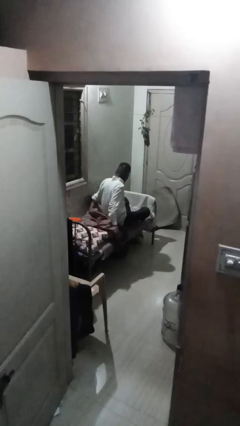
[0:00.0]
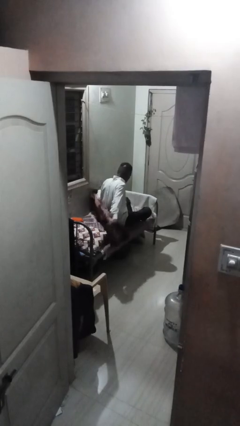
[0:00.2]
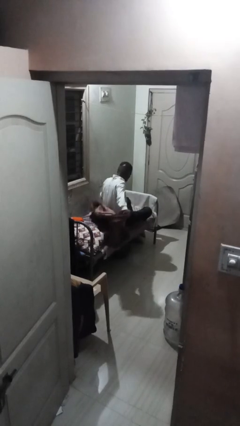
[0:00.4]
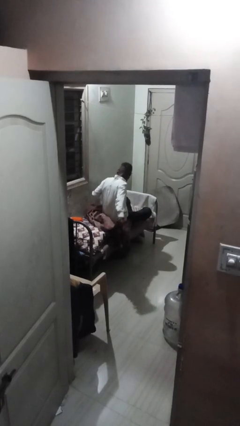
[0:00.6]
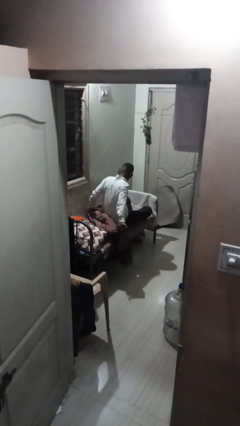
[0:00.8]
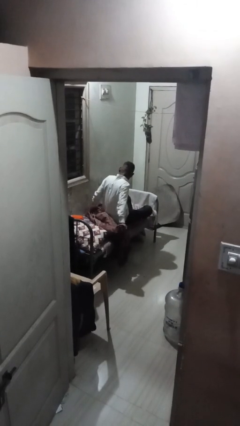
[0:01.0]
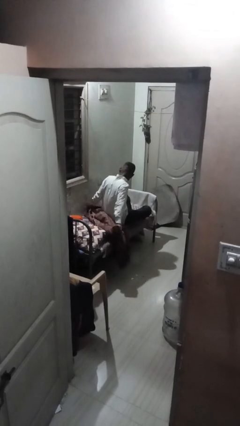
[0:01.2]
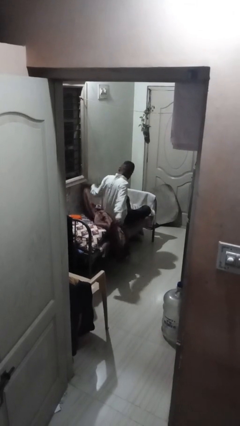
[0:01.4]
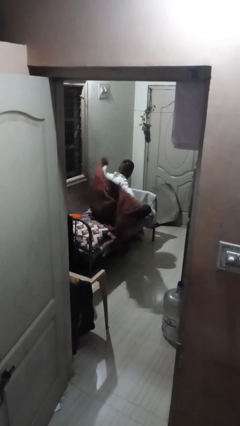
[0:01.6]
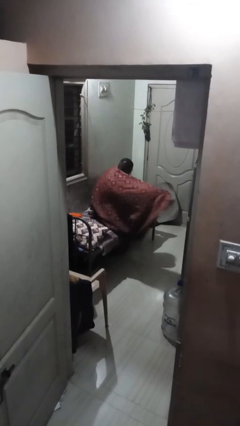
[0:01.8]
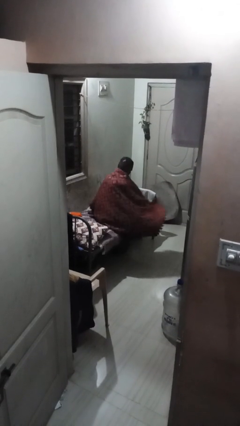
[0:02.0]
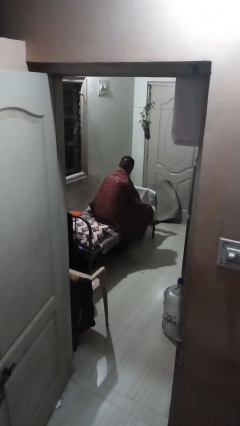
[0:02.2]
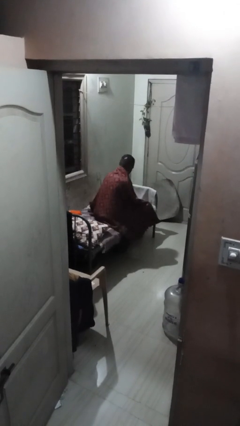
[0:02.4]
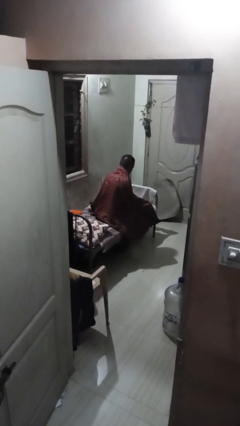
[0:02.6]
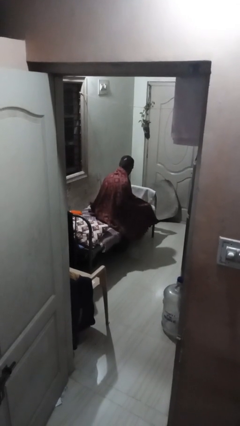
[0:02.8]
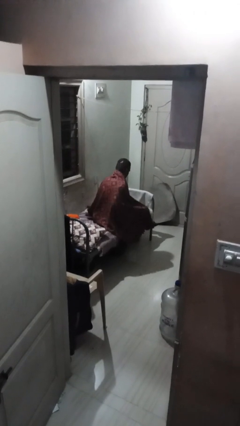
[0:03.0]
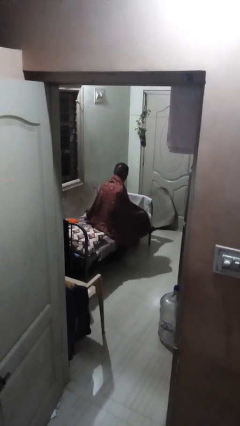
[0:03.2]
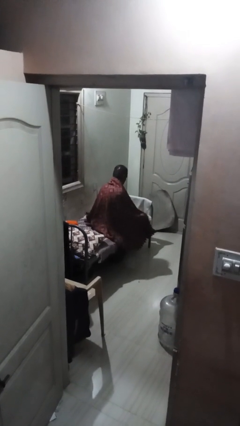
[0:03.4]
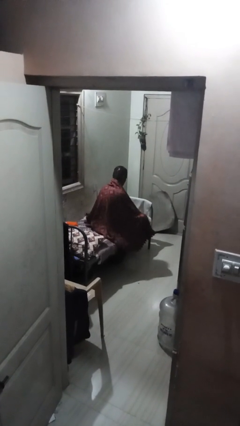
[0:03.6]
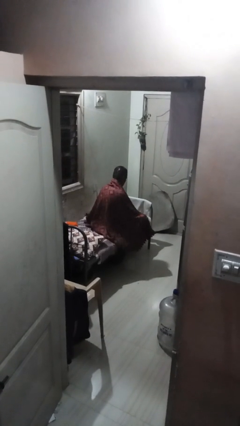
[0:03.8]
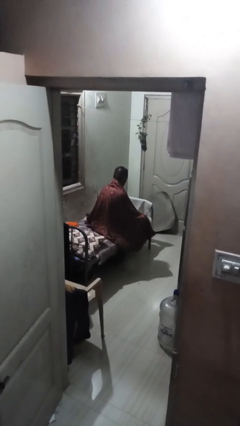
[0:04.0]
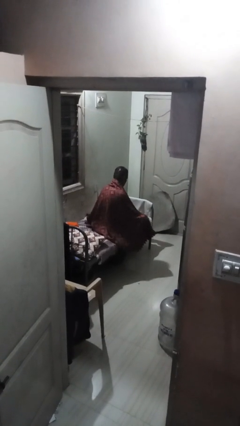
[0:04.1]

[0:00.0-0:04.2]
person covers with blanket

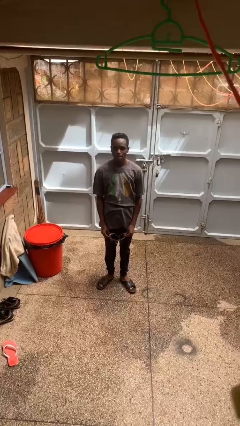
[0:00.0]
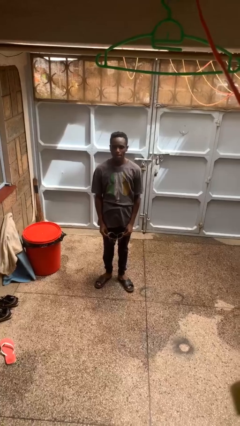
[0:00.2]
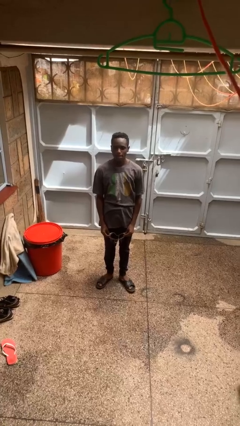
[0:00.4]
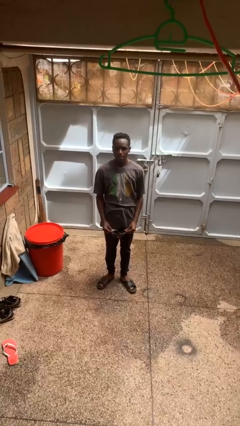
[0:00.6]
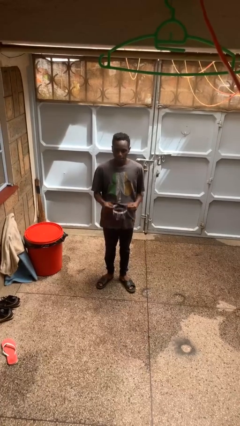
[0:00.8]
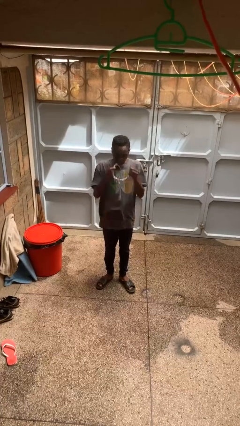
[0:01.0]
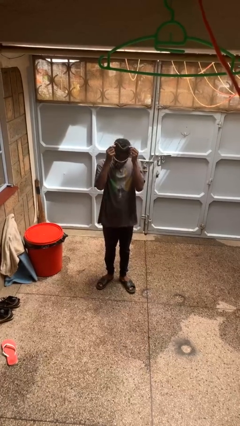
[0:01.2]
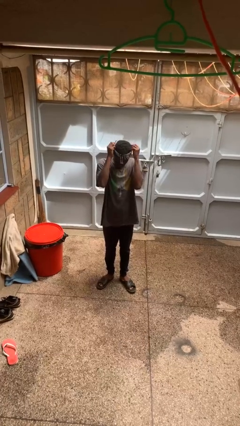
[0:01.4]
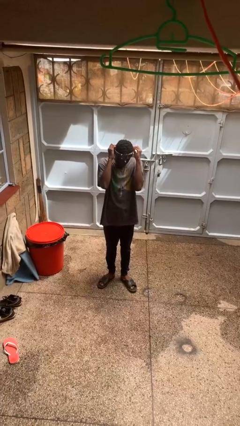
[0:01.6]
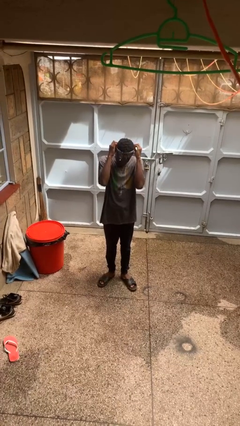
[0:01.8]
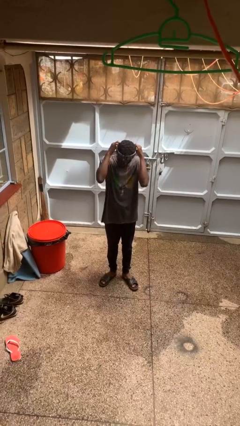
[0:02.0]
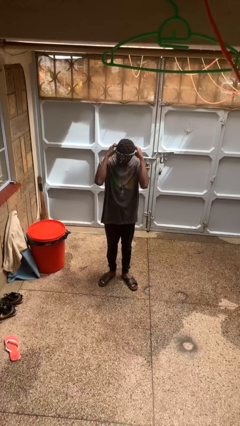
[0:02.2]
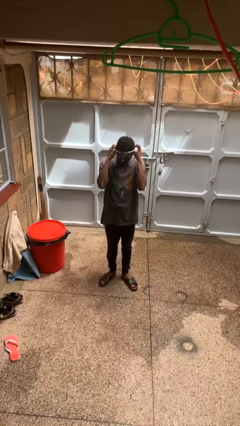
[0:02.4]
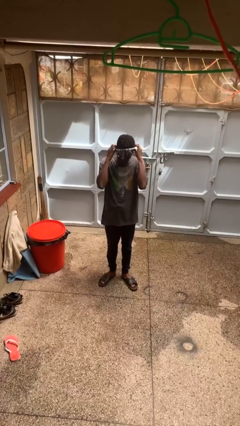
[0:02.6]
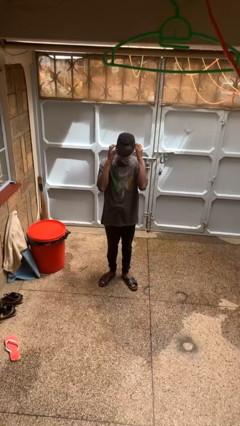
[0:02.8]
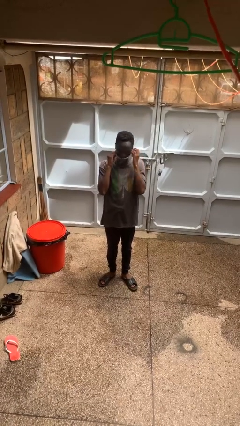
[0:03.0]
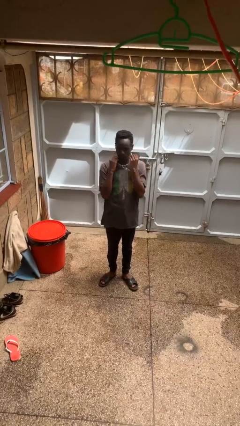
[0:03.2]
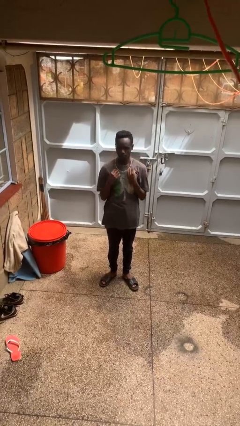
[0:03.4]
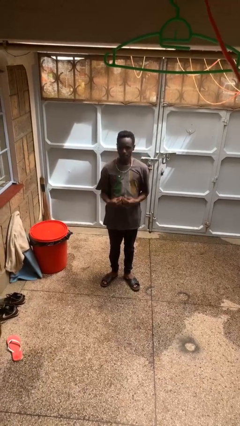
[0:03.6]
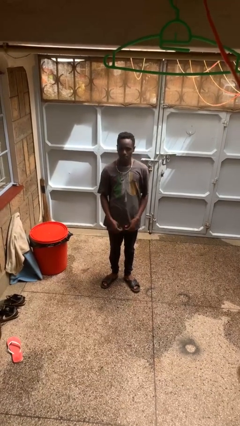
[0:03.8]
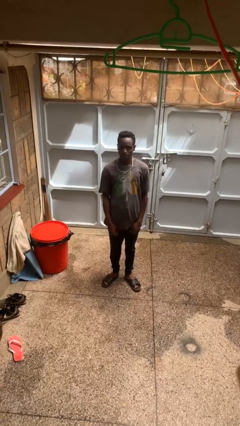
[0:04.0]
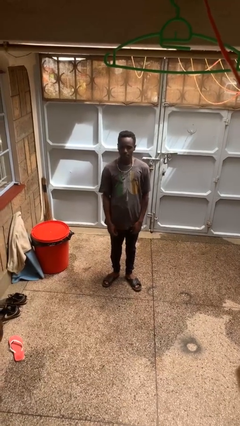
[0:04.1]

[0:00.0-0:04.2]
person puts on necklace

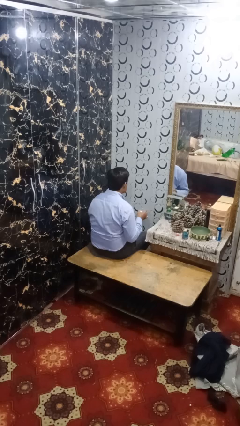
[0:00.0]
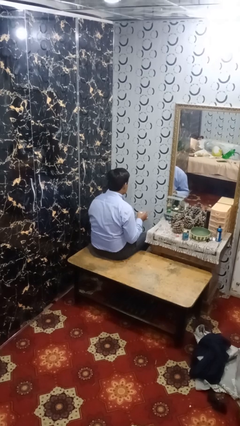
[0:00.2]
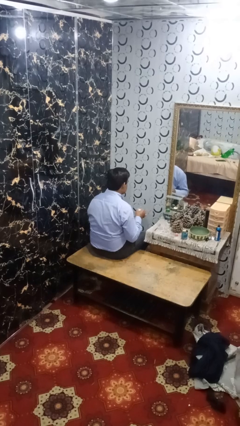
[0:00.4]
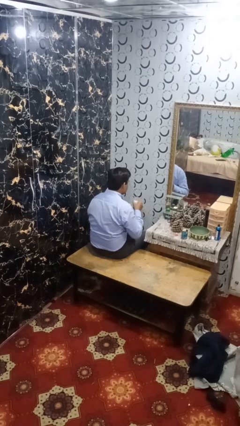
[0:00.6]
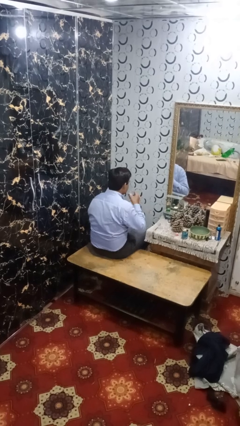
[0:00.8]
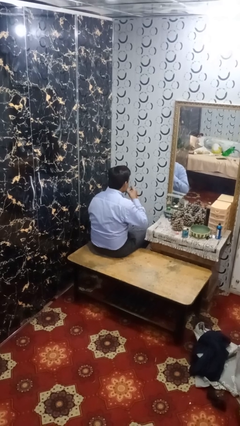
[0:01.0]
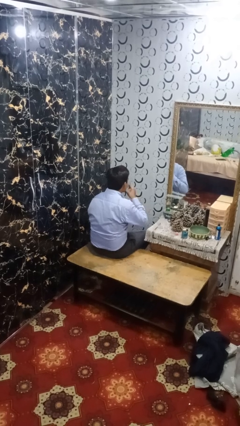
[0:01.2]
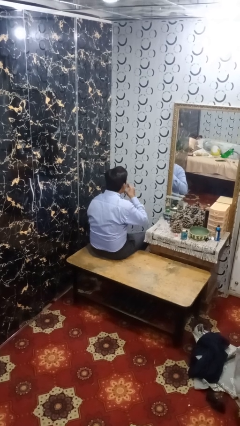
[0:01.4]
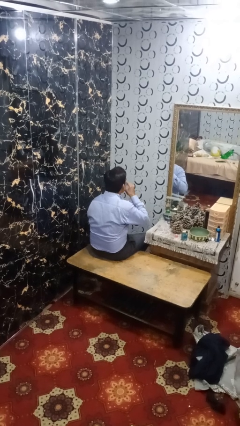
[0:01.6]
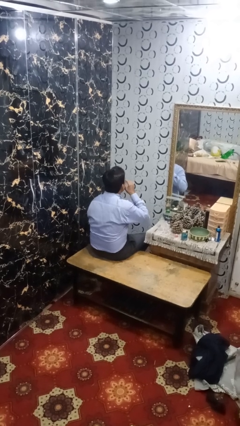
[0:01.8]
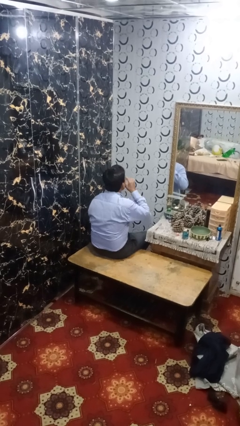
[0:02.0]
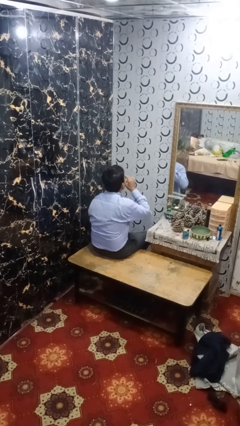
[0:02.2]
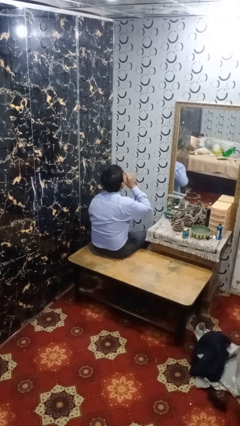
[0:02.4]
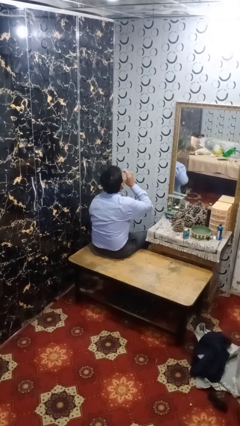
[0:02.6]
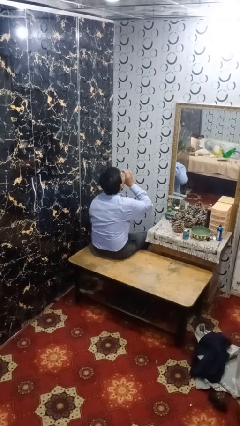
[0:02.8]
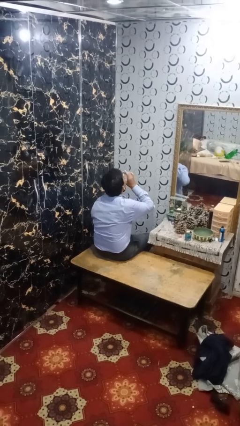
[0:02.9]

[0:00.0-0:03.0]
person drinks from shotglass

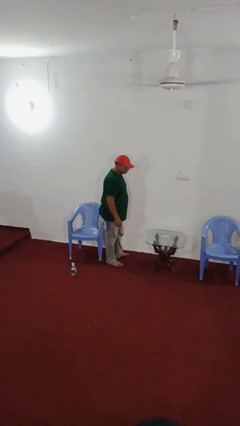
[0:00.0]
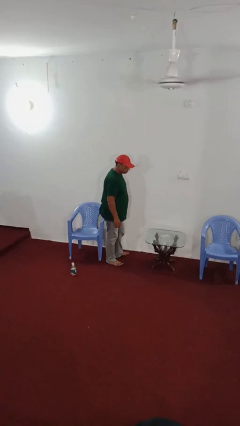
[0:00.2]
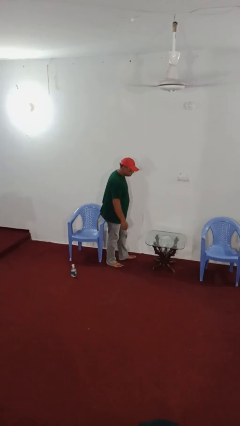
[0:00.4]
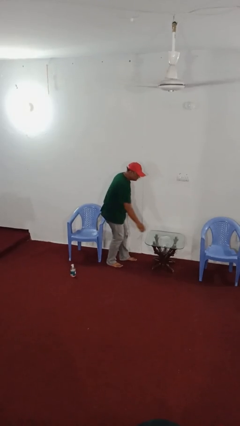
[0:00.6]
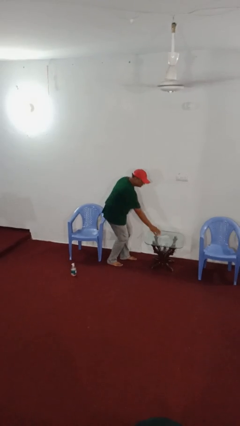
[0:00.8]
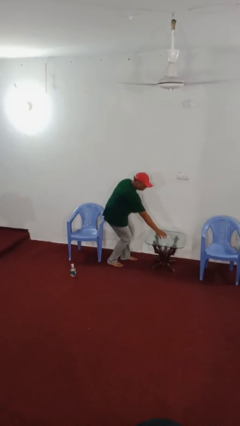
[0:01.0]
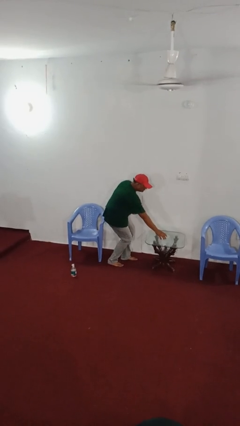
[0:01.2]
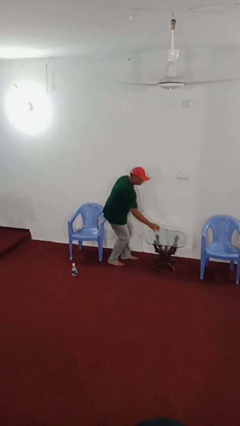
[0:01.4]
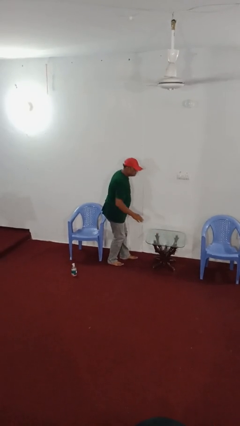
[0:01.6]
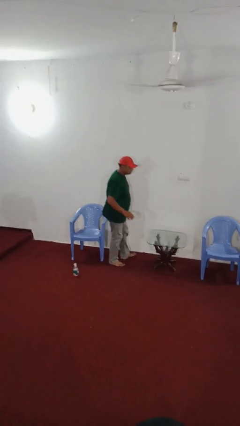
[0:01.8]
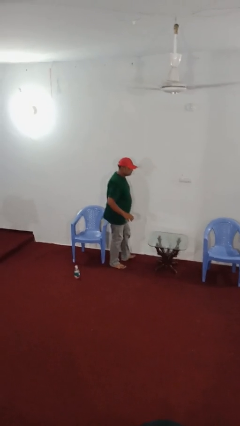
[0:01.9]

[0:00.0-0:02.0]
person picks up object from table

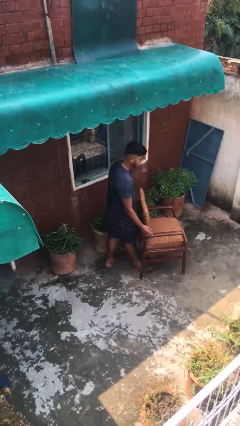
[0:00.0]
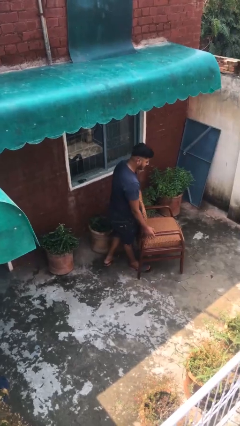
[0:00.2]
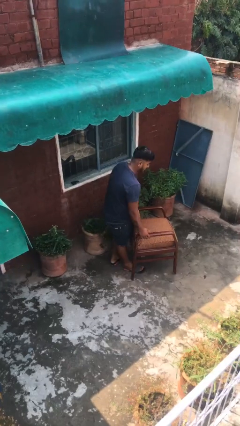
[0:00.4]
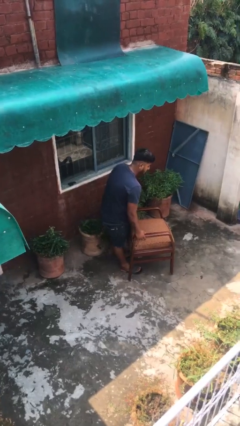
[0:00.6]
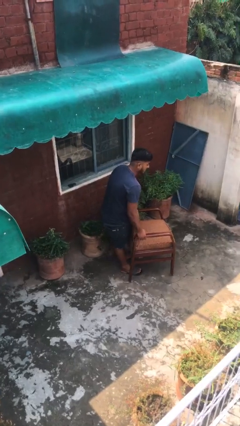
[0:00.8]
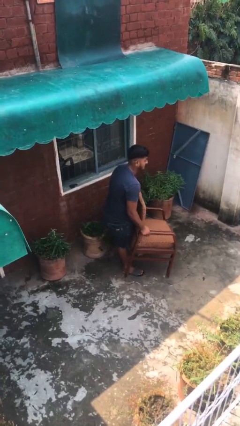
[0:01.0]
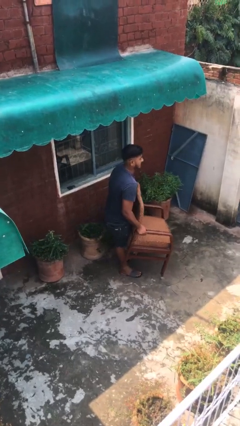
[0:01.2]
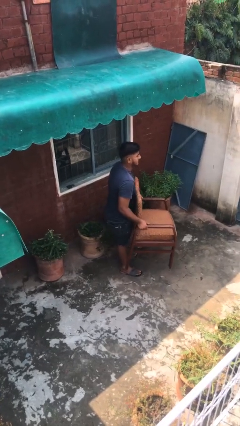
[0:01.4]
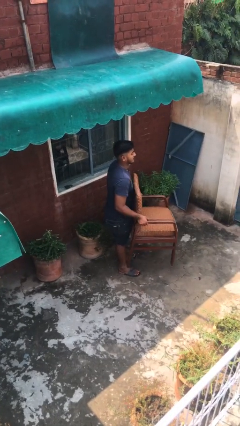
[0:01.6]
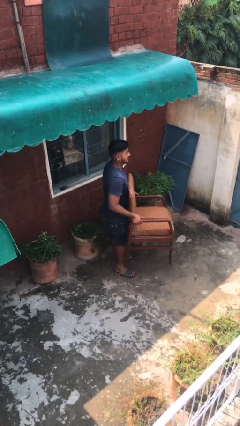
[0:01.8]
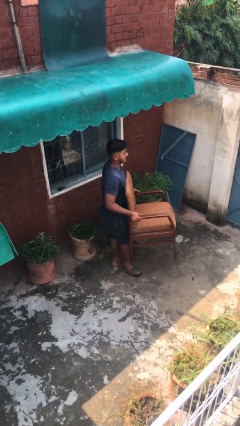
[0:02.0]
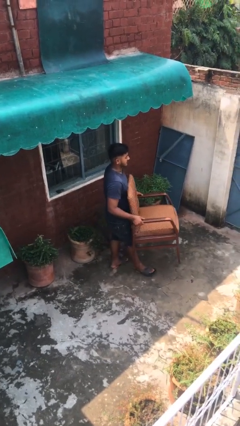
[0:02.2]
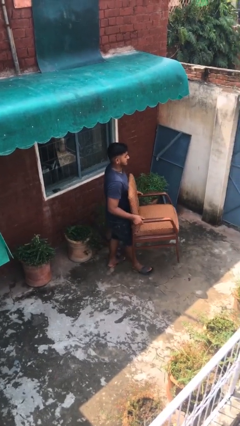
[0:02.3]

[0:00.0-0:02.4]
person picks up object from floor

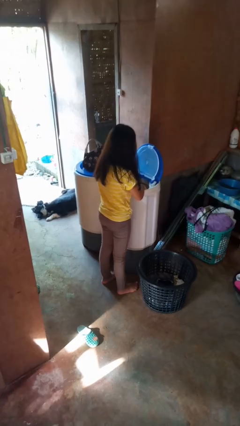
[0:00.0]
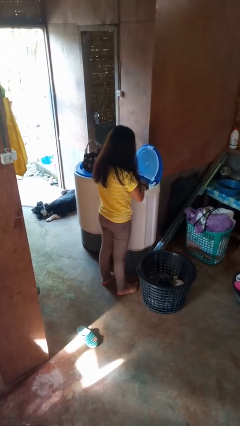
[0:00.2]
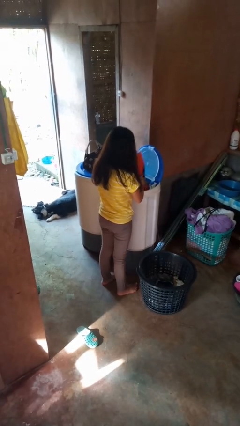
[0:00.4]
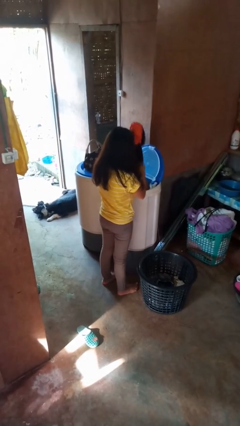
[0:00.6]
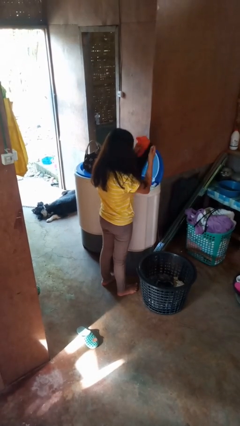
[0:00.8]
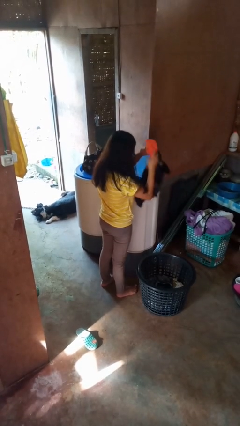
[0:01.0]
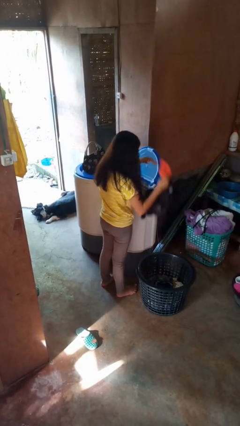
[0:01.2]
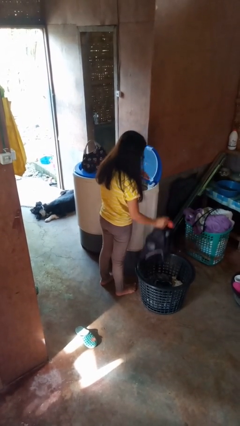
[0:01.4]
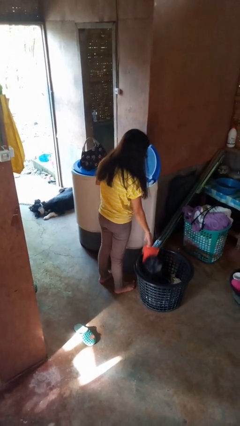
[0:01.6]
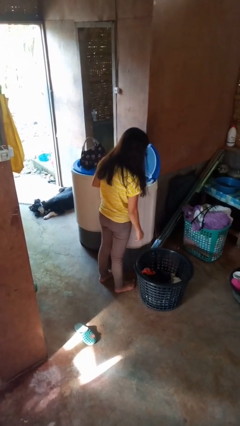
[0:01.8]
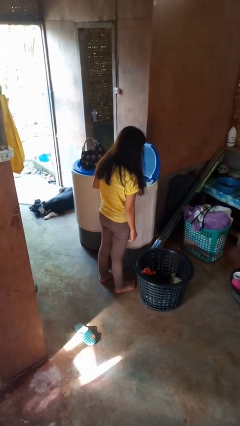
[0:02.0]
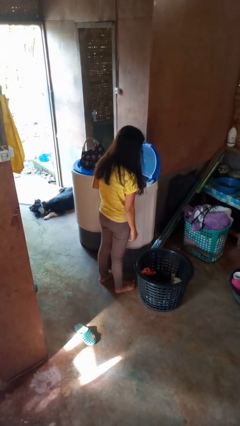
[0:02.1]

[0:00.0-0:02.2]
person unloads clotheswasher
